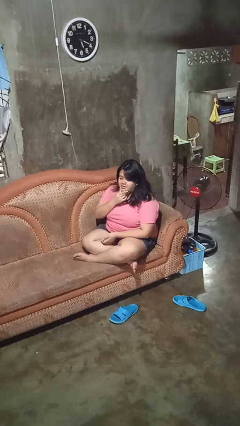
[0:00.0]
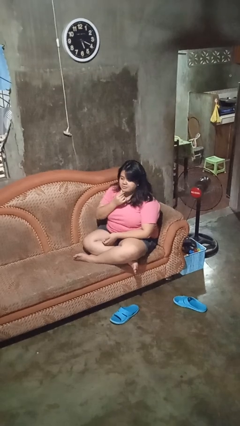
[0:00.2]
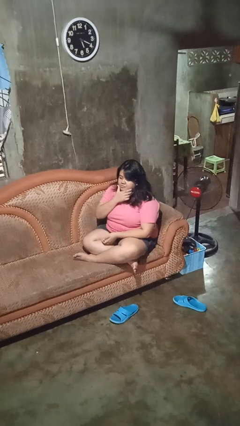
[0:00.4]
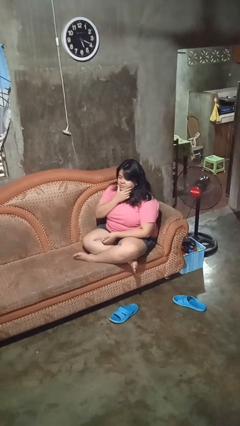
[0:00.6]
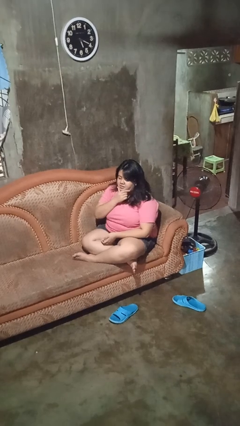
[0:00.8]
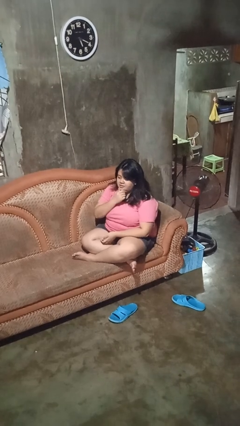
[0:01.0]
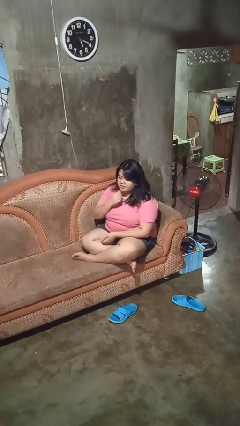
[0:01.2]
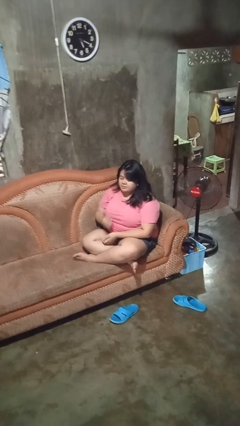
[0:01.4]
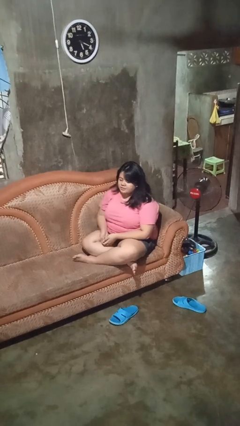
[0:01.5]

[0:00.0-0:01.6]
person strokes chin

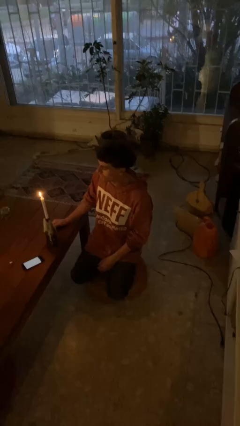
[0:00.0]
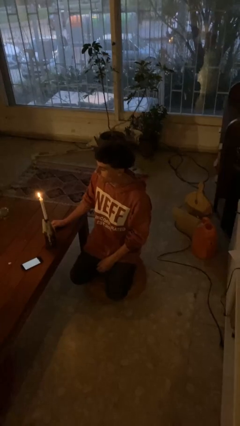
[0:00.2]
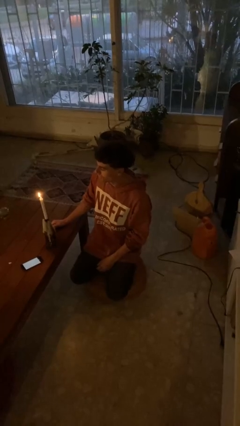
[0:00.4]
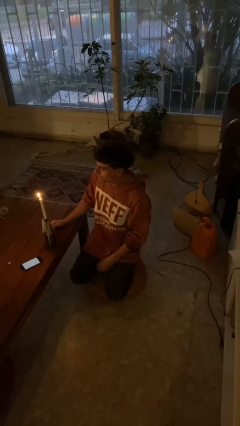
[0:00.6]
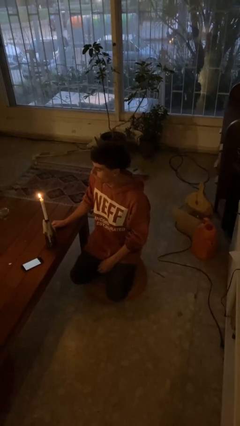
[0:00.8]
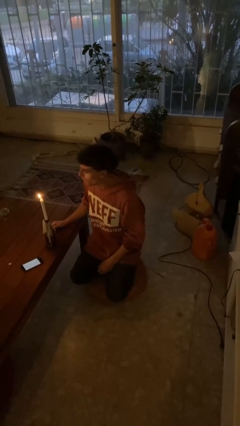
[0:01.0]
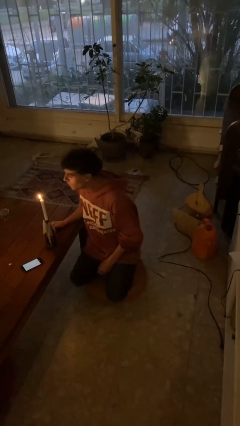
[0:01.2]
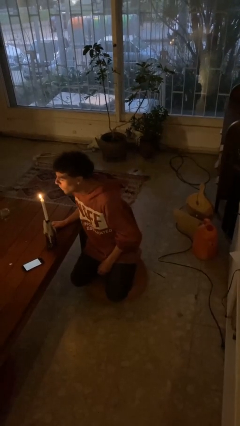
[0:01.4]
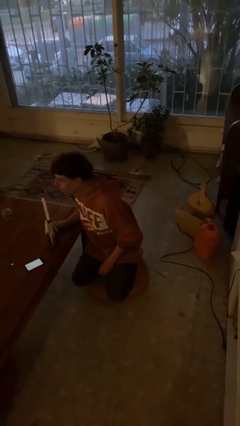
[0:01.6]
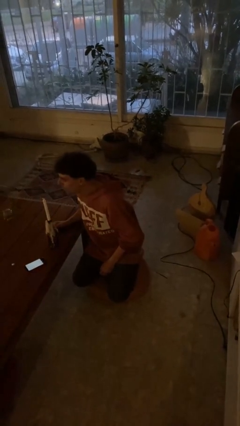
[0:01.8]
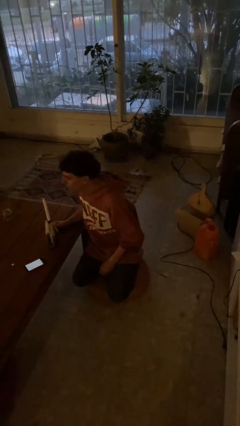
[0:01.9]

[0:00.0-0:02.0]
person extinguishes candle

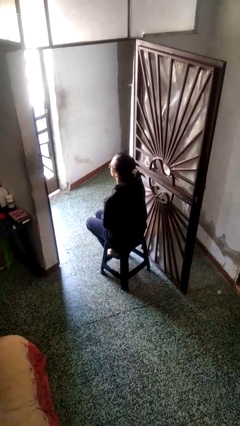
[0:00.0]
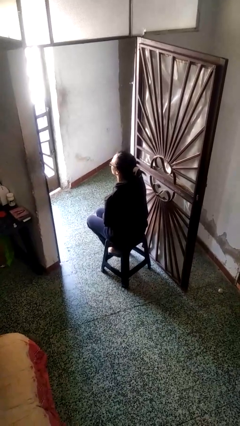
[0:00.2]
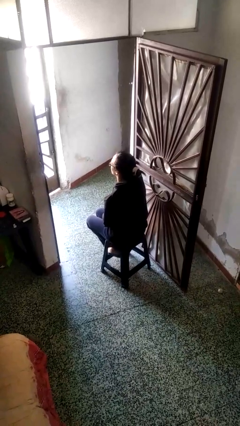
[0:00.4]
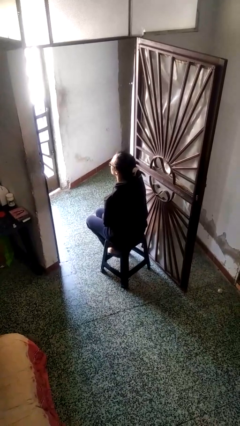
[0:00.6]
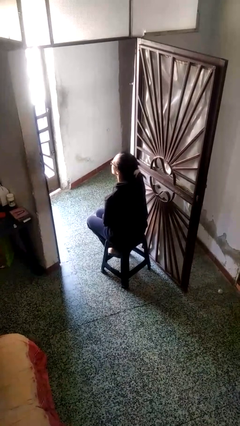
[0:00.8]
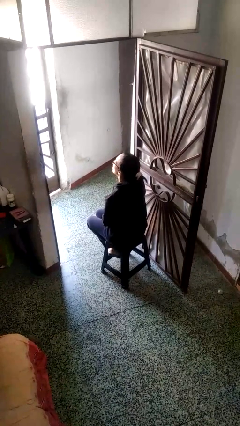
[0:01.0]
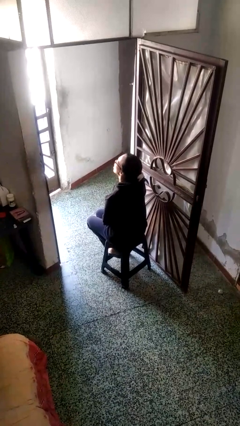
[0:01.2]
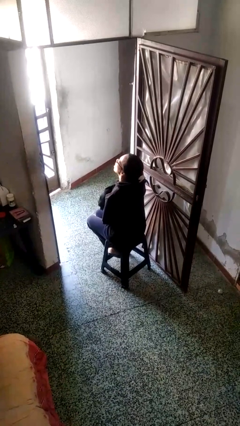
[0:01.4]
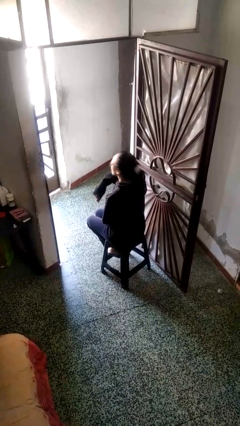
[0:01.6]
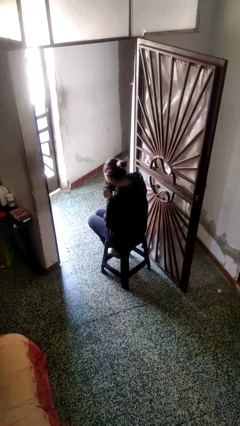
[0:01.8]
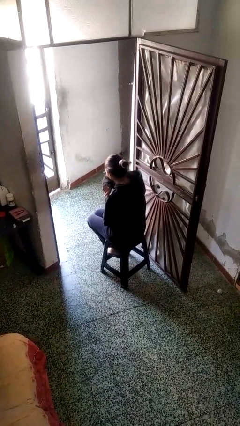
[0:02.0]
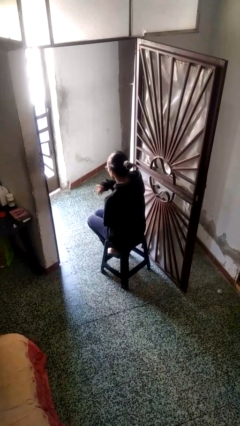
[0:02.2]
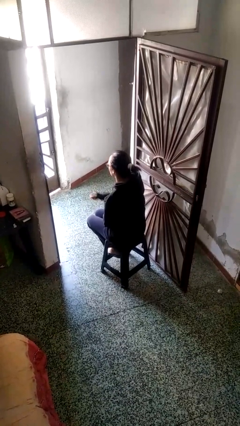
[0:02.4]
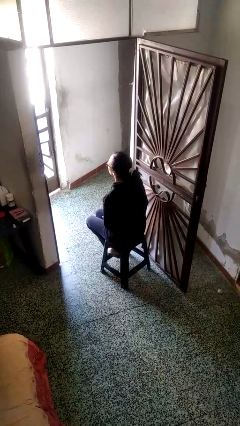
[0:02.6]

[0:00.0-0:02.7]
person sneezes into arm

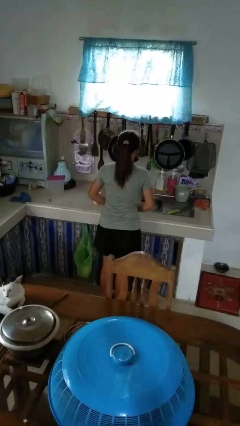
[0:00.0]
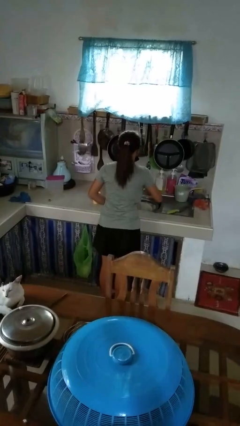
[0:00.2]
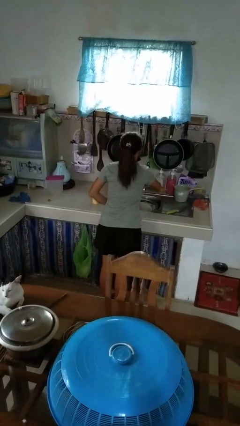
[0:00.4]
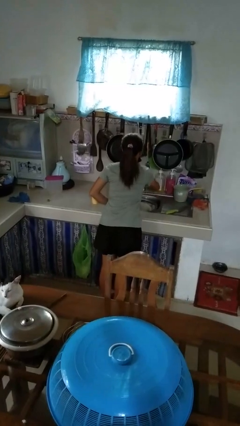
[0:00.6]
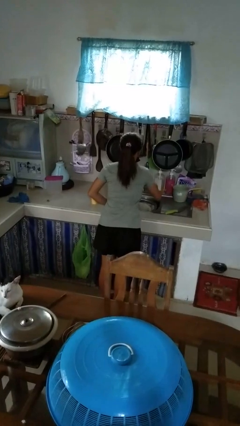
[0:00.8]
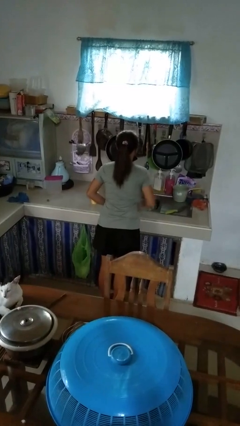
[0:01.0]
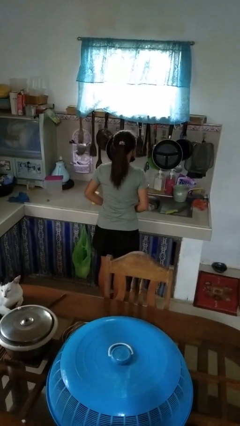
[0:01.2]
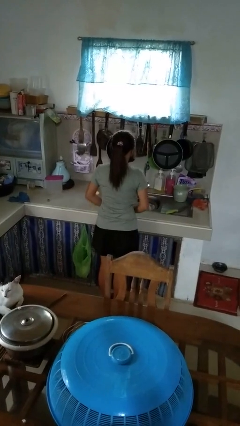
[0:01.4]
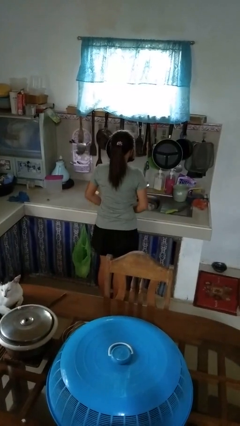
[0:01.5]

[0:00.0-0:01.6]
person turns off faucet

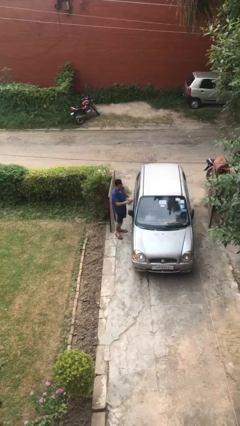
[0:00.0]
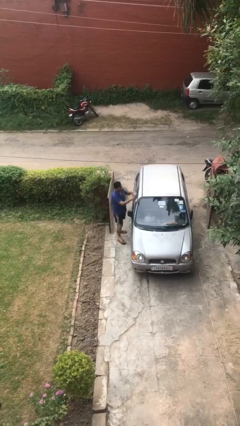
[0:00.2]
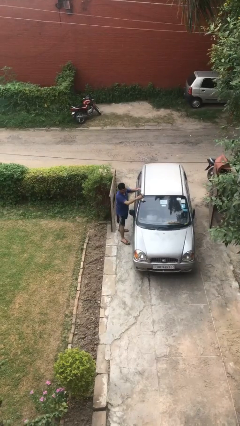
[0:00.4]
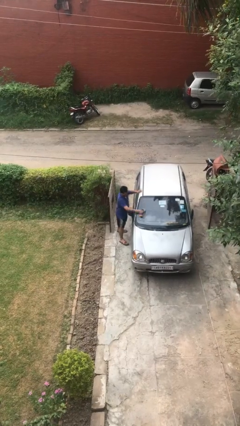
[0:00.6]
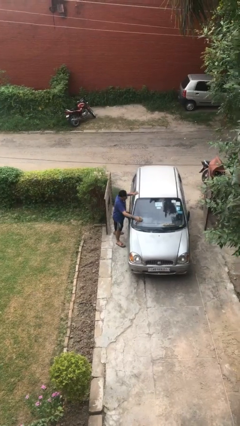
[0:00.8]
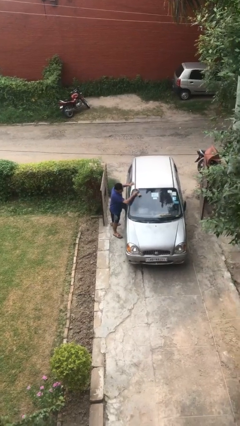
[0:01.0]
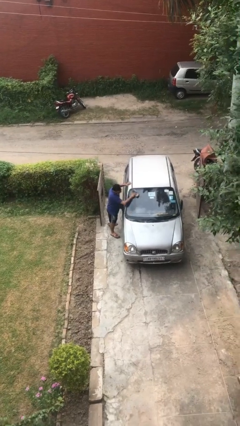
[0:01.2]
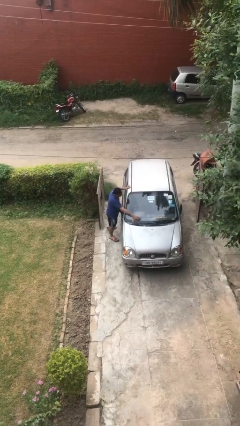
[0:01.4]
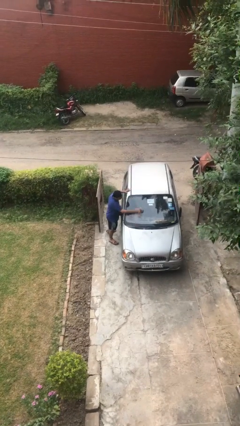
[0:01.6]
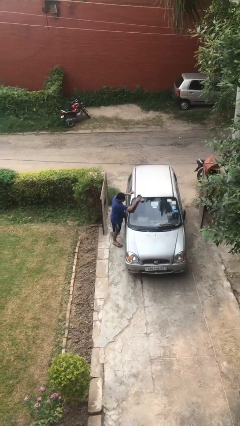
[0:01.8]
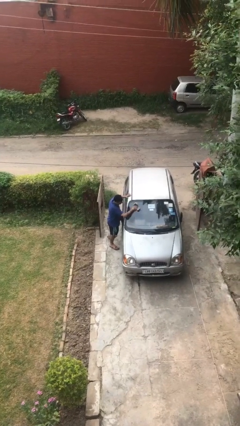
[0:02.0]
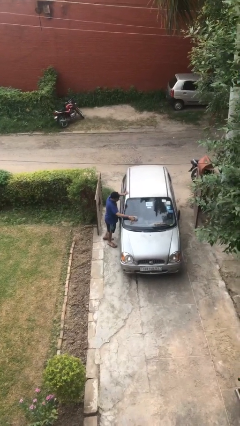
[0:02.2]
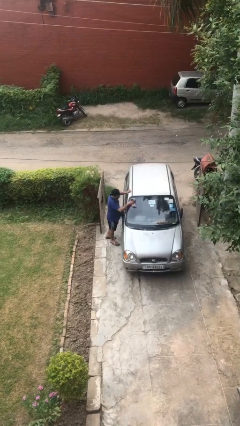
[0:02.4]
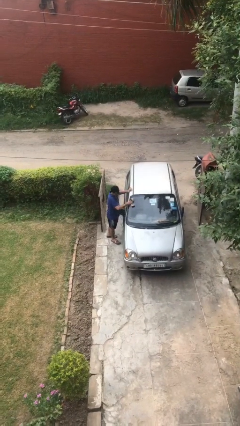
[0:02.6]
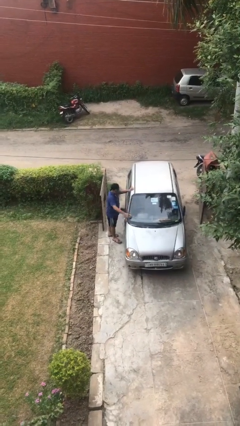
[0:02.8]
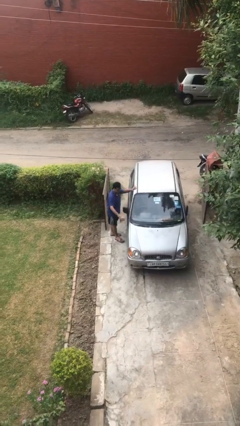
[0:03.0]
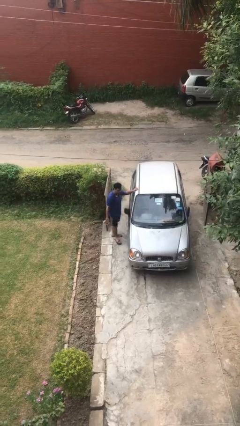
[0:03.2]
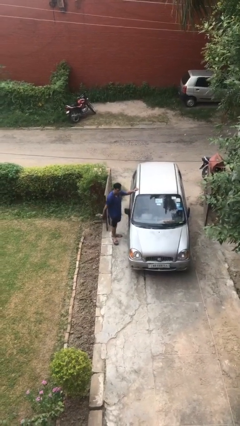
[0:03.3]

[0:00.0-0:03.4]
person polishes car with rag

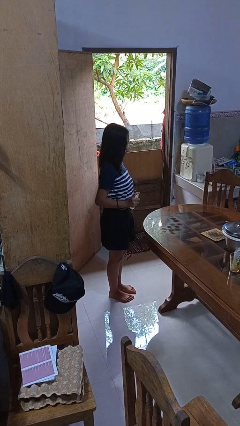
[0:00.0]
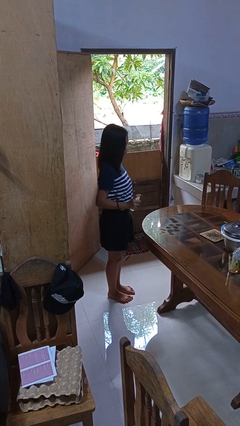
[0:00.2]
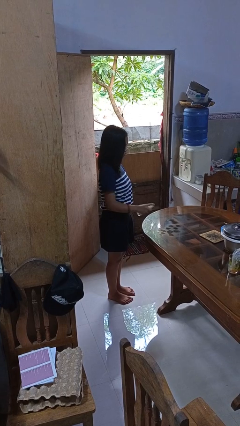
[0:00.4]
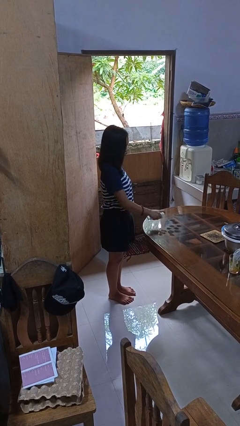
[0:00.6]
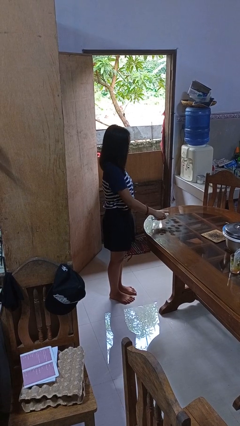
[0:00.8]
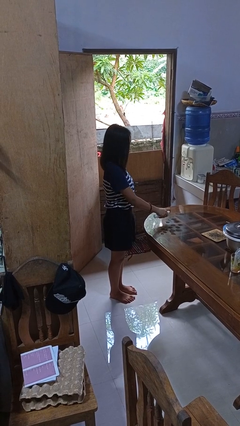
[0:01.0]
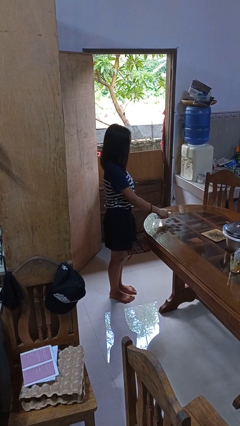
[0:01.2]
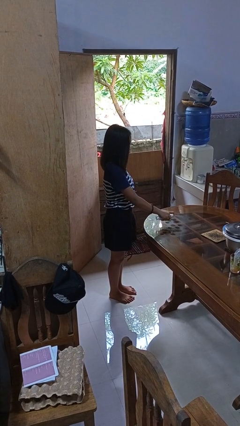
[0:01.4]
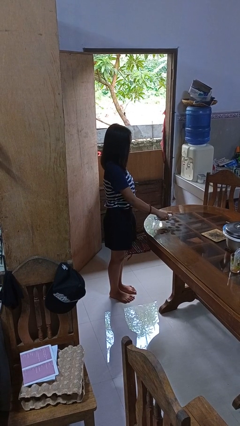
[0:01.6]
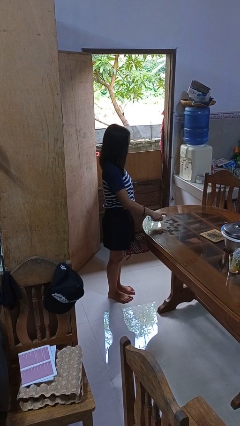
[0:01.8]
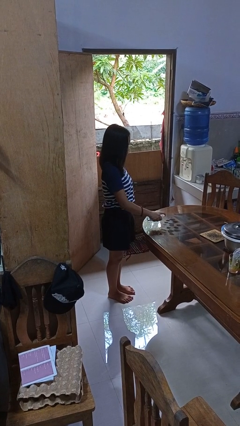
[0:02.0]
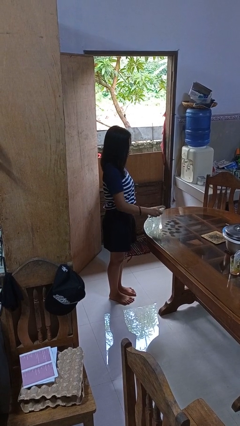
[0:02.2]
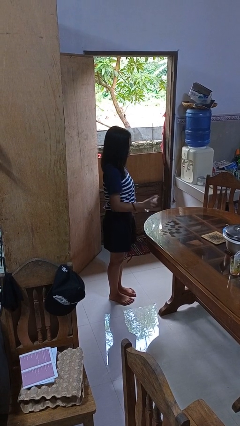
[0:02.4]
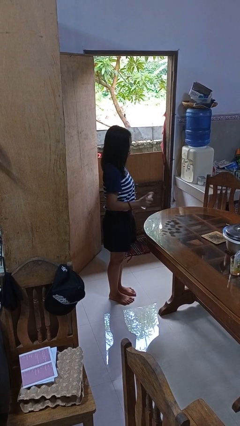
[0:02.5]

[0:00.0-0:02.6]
person sprays from bottle

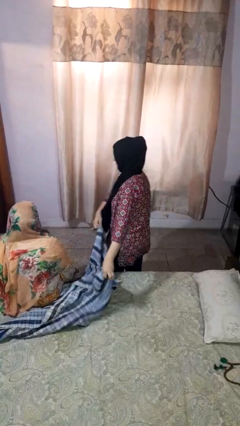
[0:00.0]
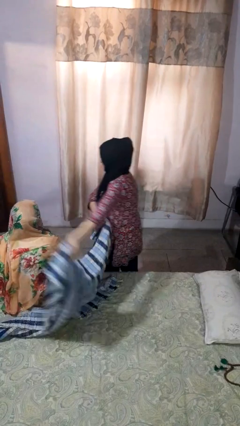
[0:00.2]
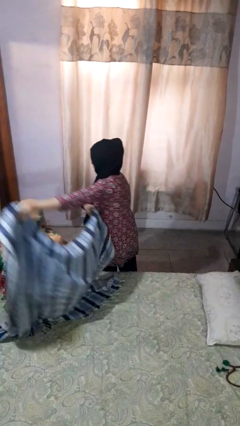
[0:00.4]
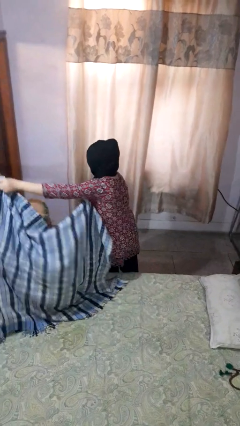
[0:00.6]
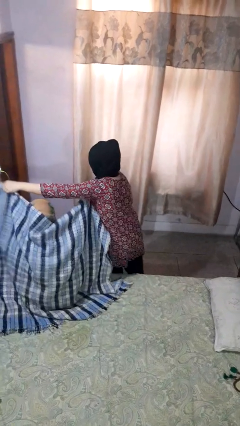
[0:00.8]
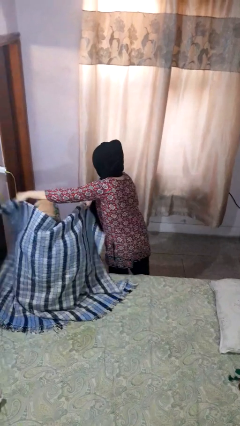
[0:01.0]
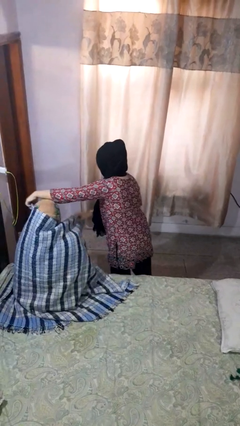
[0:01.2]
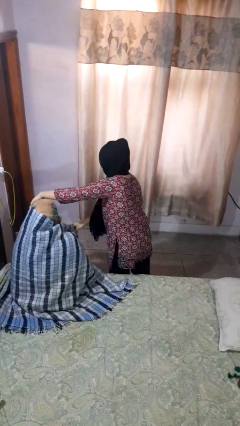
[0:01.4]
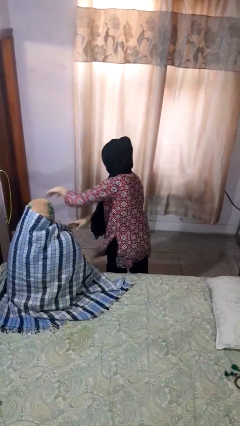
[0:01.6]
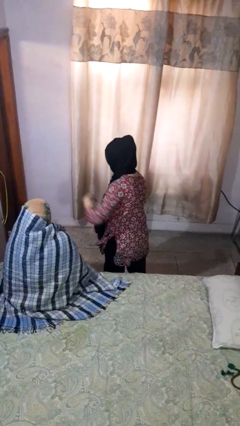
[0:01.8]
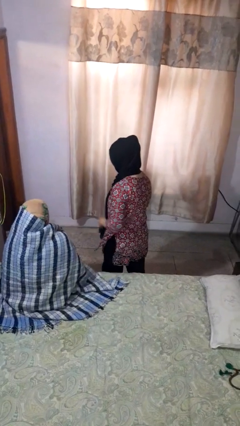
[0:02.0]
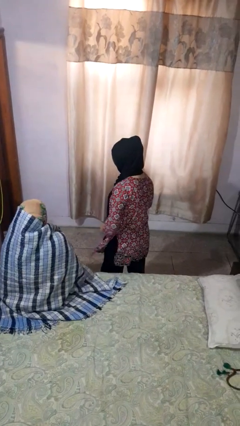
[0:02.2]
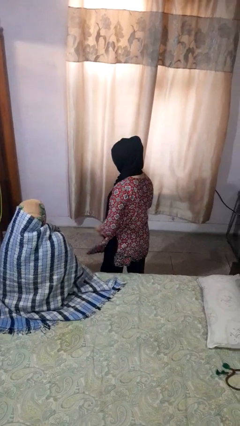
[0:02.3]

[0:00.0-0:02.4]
person covers friend with blanket

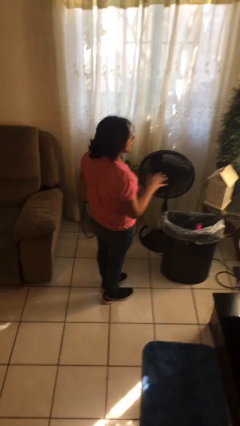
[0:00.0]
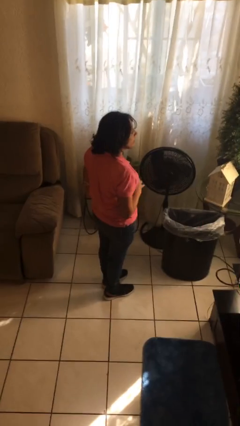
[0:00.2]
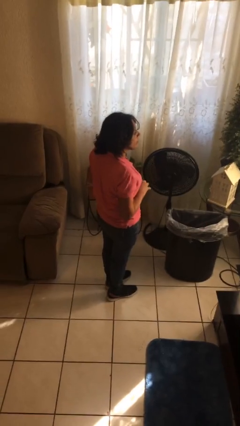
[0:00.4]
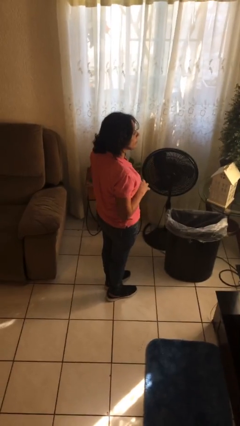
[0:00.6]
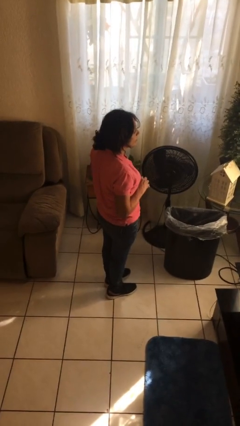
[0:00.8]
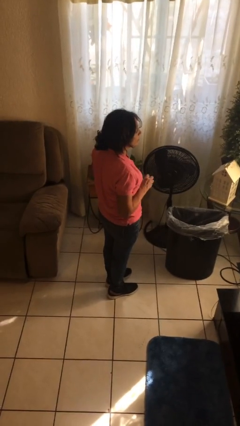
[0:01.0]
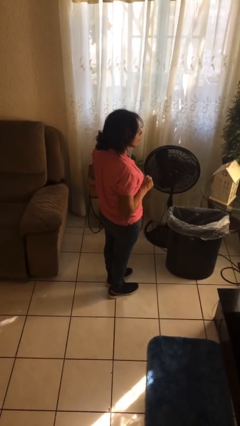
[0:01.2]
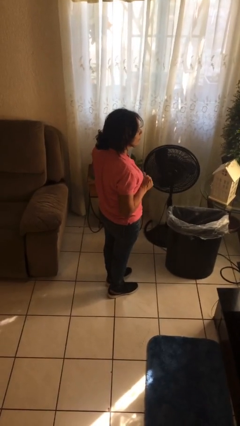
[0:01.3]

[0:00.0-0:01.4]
person discards trash
